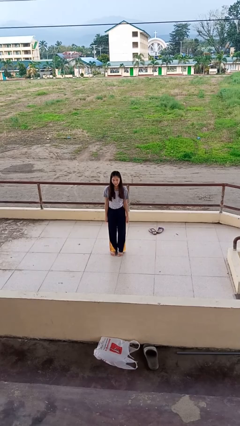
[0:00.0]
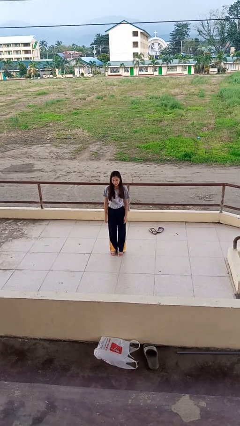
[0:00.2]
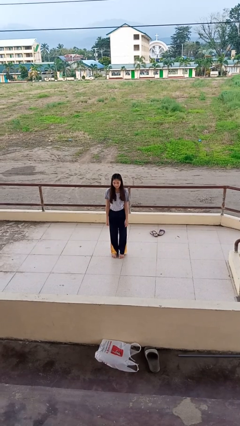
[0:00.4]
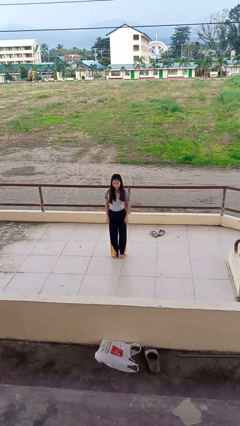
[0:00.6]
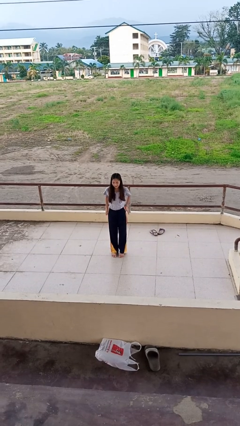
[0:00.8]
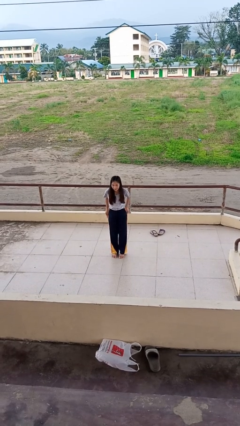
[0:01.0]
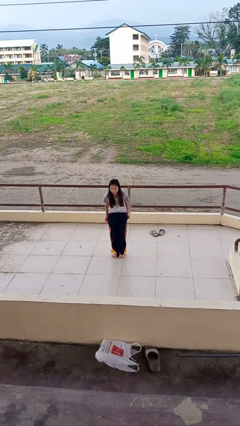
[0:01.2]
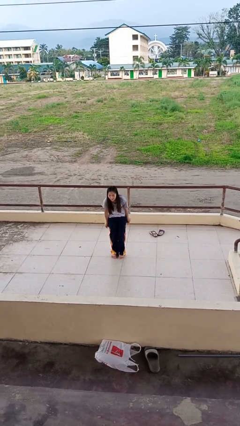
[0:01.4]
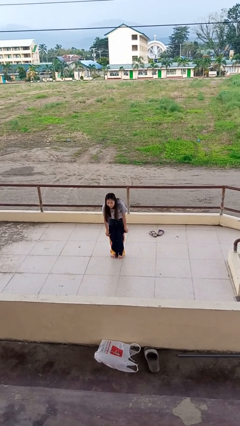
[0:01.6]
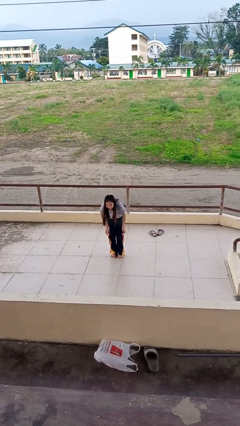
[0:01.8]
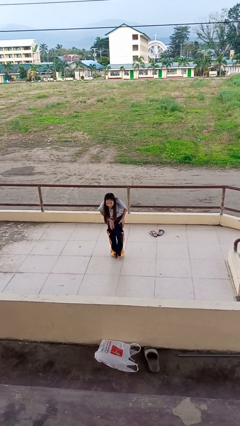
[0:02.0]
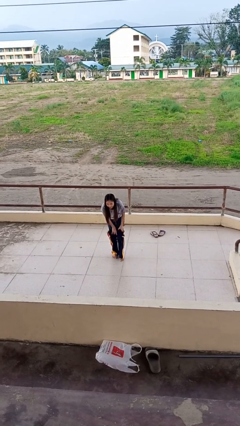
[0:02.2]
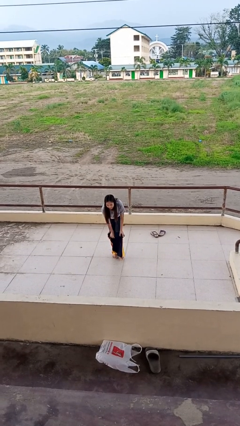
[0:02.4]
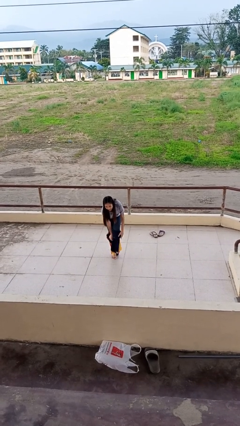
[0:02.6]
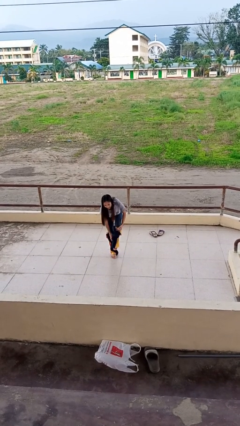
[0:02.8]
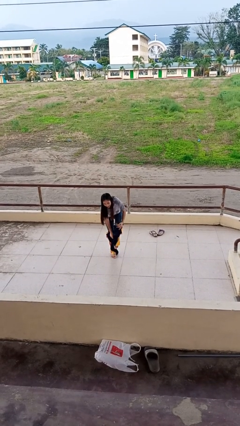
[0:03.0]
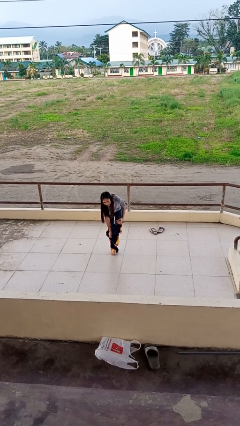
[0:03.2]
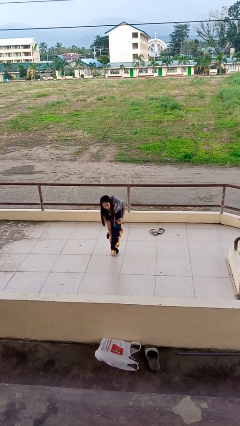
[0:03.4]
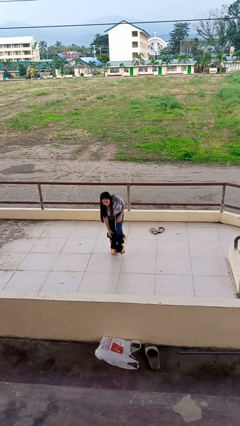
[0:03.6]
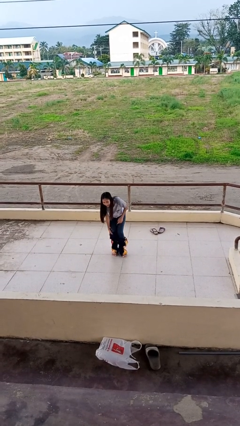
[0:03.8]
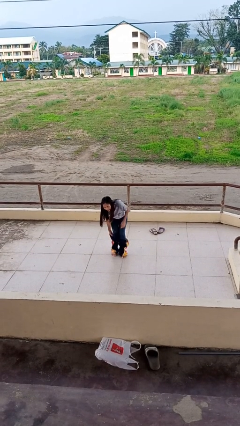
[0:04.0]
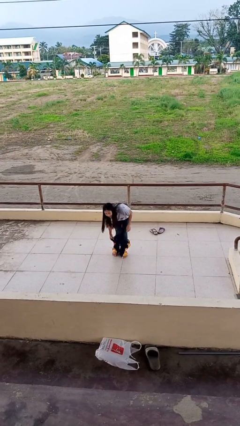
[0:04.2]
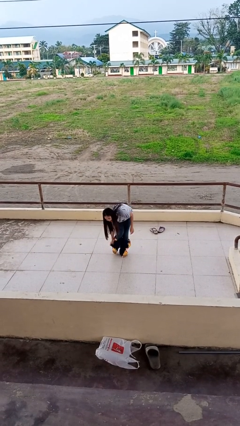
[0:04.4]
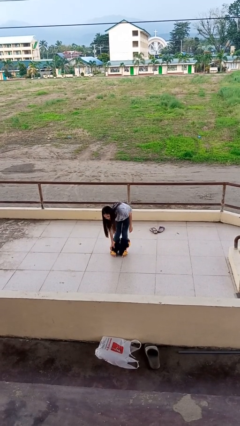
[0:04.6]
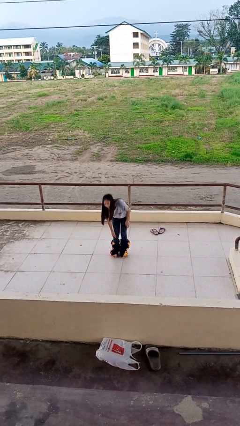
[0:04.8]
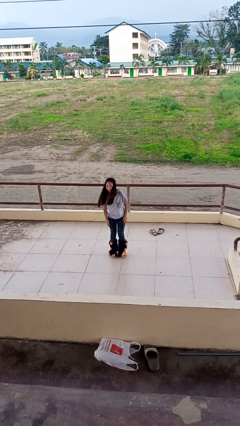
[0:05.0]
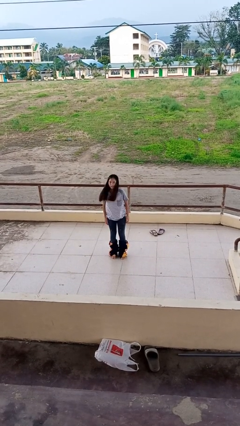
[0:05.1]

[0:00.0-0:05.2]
person takes off pants

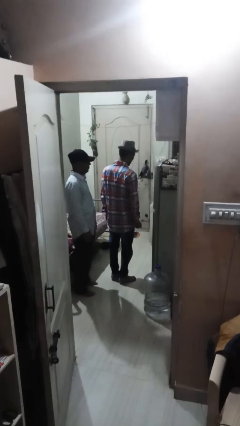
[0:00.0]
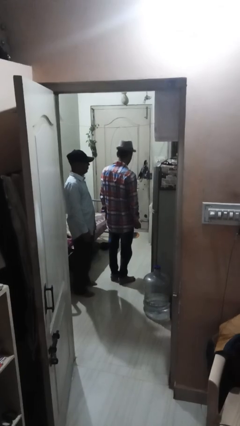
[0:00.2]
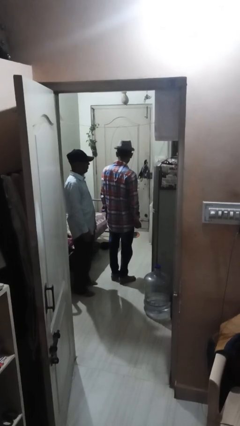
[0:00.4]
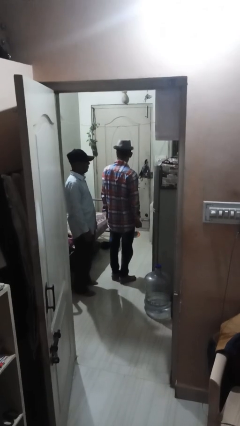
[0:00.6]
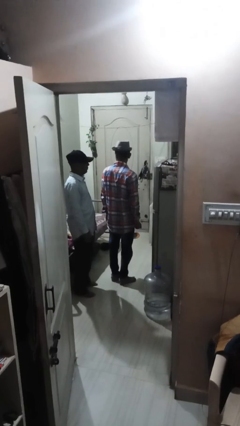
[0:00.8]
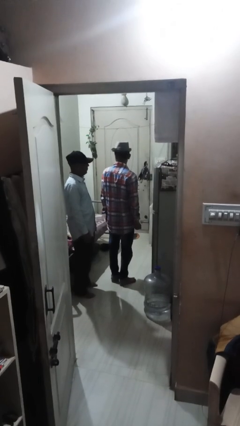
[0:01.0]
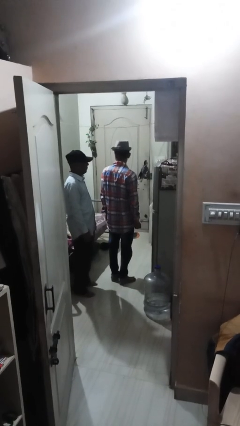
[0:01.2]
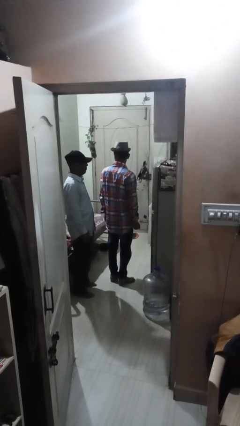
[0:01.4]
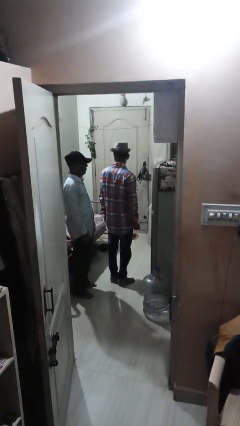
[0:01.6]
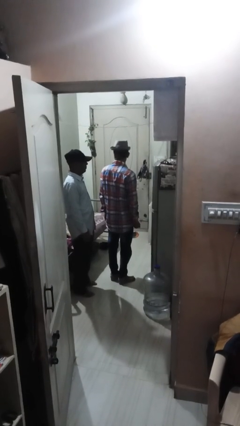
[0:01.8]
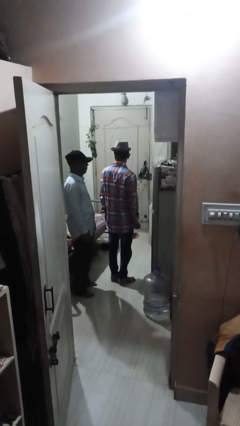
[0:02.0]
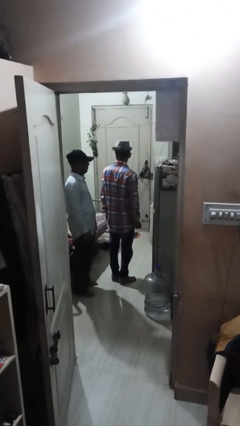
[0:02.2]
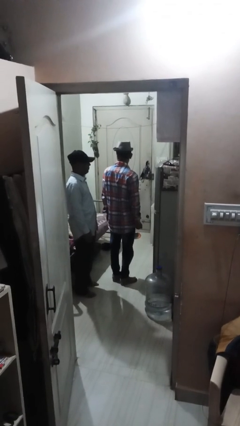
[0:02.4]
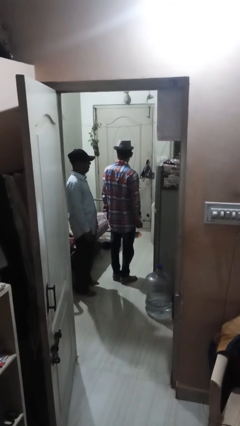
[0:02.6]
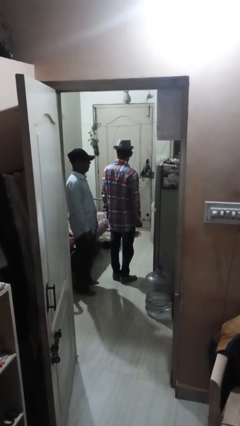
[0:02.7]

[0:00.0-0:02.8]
person looks over shoulder

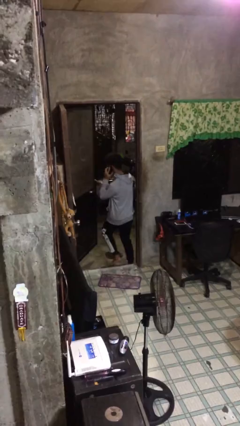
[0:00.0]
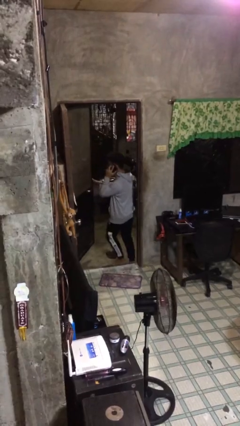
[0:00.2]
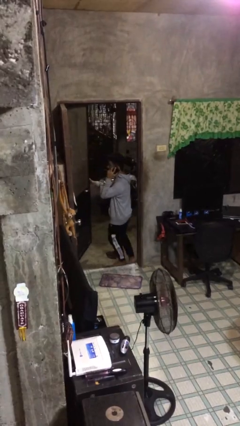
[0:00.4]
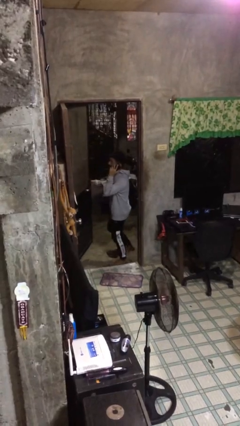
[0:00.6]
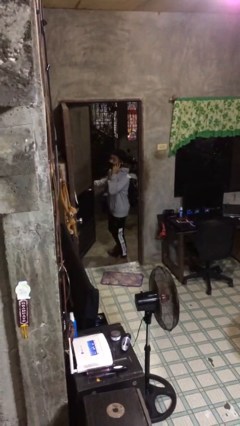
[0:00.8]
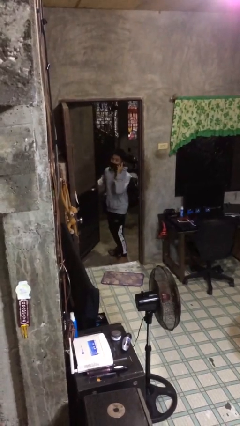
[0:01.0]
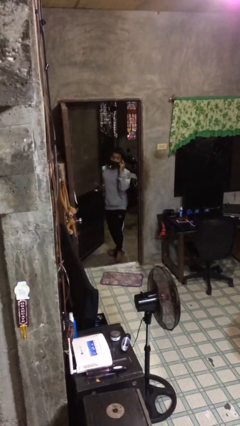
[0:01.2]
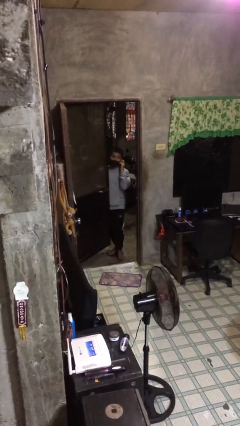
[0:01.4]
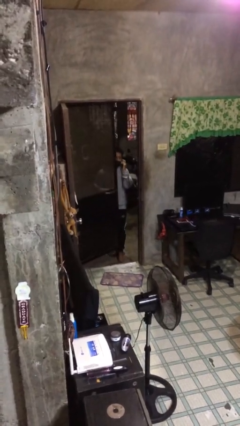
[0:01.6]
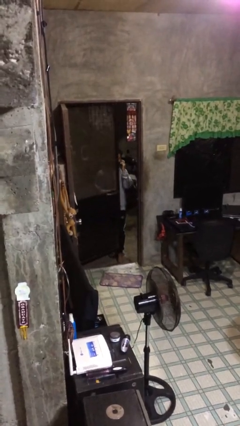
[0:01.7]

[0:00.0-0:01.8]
person exits scene through structure

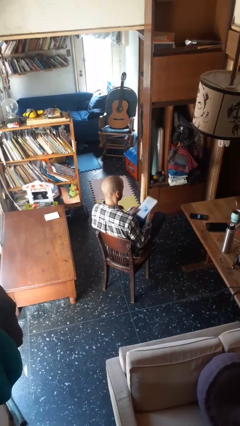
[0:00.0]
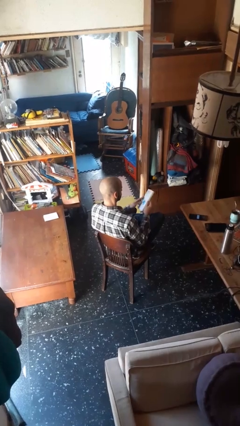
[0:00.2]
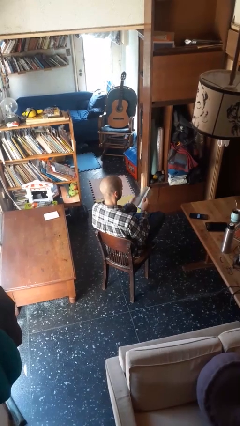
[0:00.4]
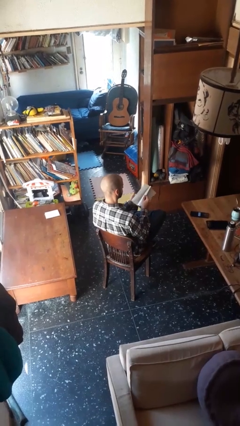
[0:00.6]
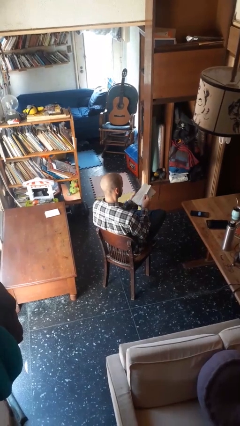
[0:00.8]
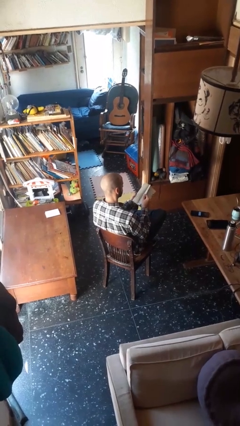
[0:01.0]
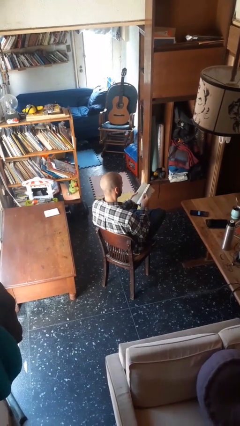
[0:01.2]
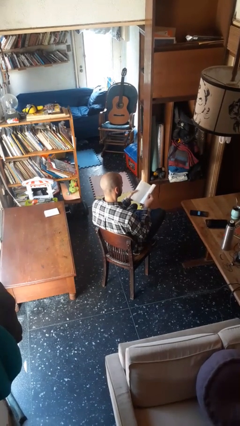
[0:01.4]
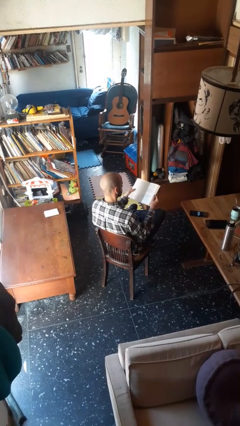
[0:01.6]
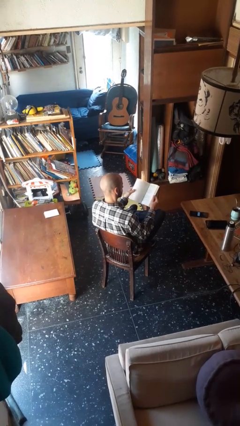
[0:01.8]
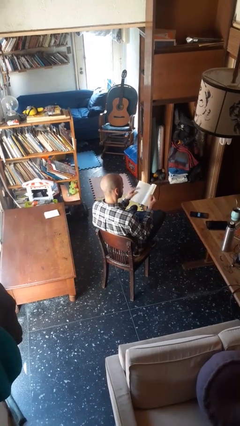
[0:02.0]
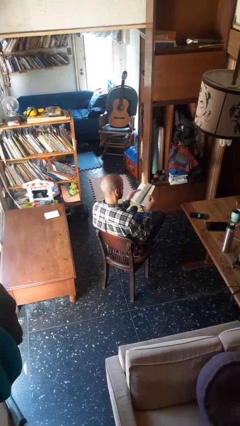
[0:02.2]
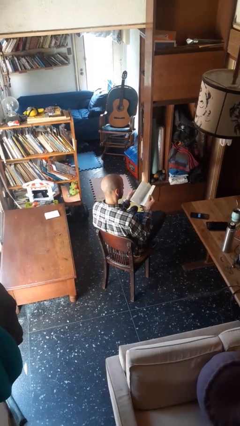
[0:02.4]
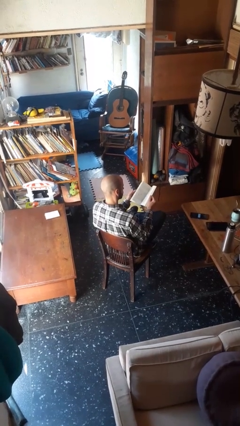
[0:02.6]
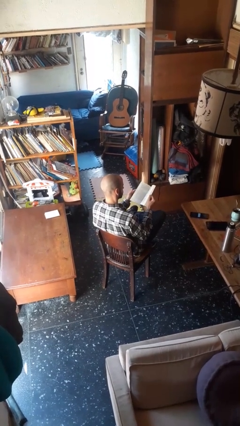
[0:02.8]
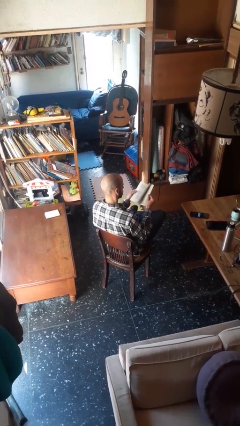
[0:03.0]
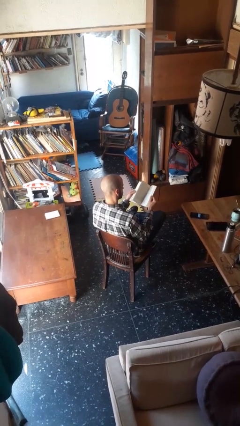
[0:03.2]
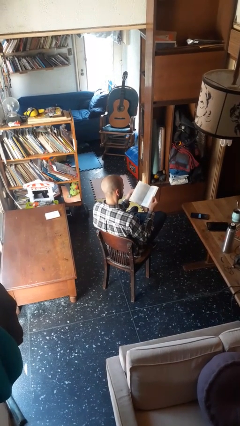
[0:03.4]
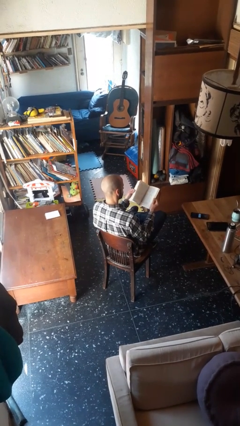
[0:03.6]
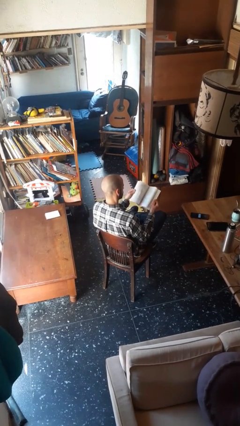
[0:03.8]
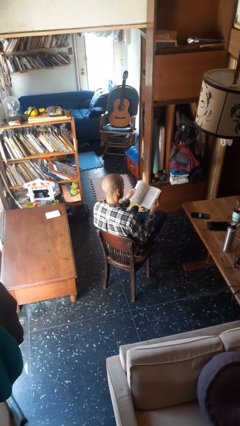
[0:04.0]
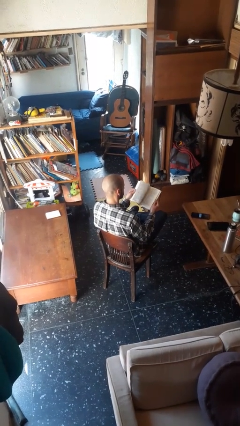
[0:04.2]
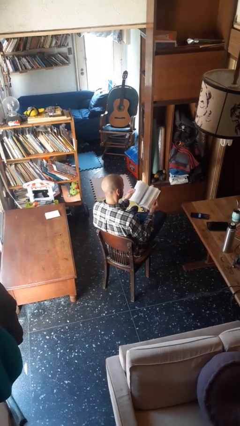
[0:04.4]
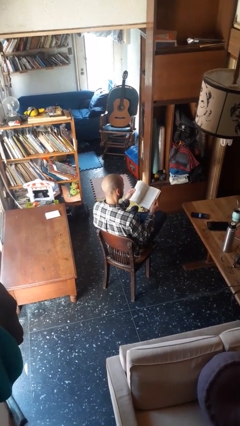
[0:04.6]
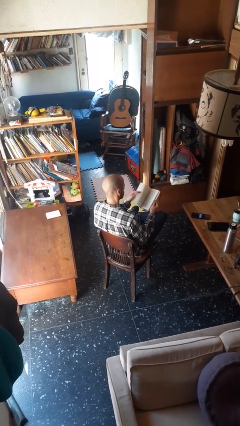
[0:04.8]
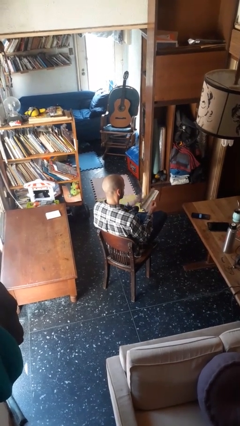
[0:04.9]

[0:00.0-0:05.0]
person reads book

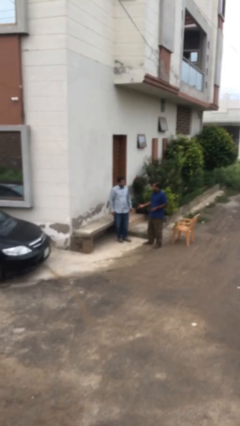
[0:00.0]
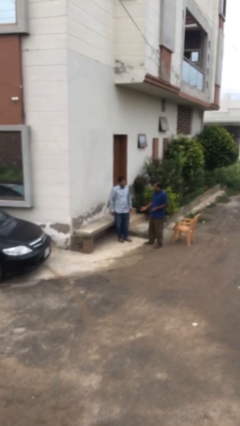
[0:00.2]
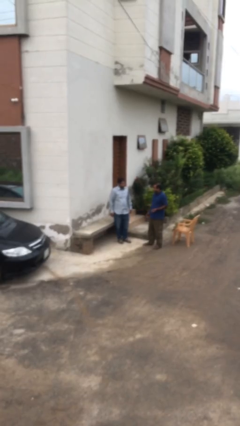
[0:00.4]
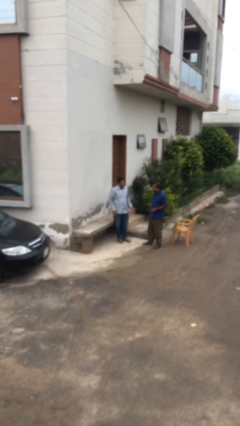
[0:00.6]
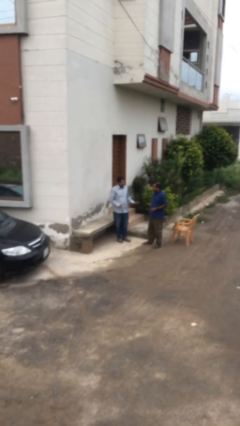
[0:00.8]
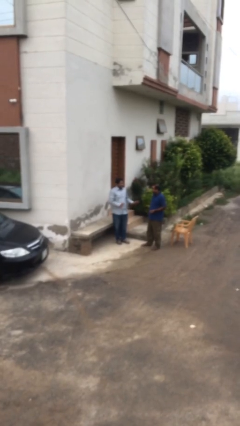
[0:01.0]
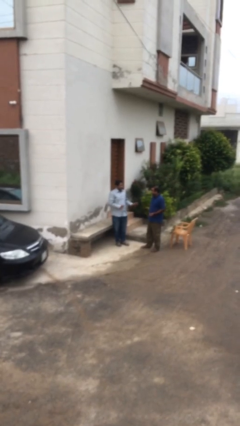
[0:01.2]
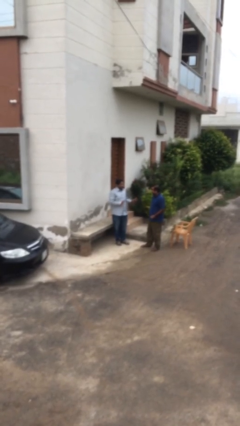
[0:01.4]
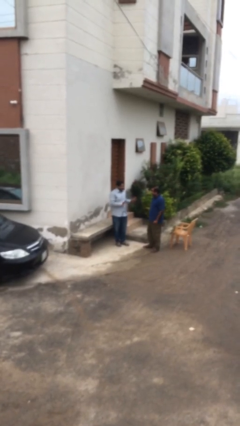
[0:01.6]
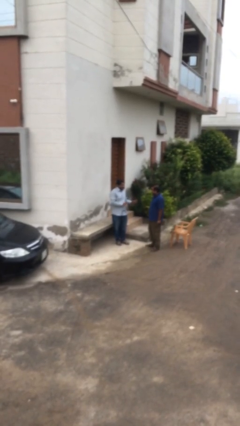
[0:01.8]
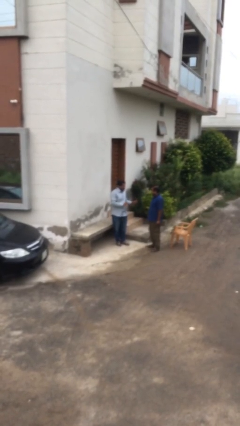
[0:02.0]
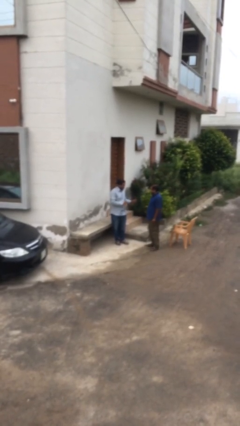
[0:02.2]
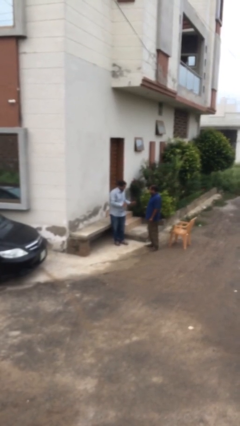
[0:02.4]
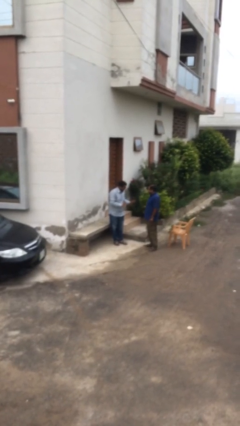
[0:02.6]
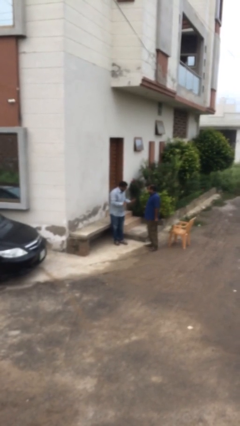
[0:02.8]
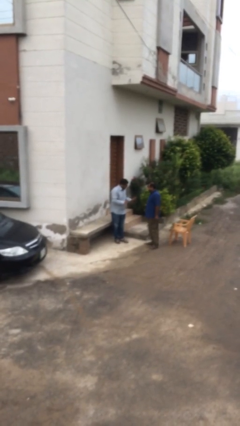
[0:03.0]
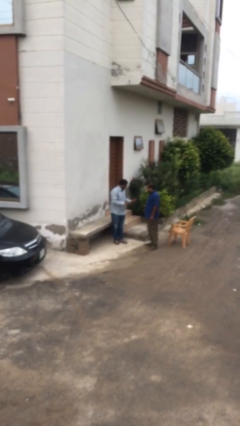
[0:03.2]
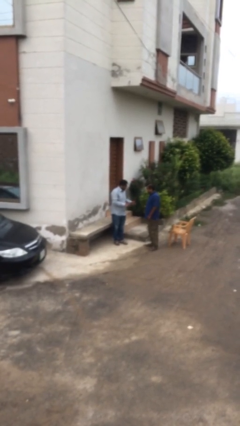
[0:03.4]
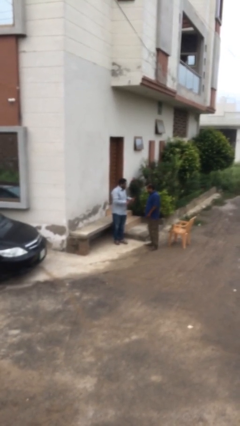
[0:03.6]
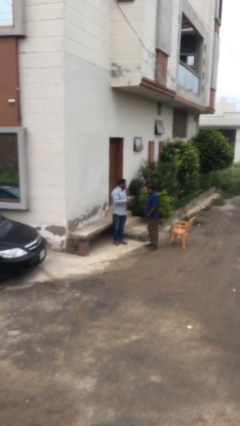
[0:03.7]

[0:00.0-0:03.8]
person talks to person
